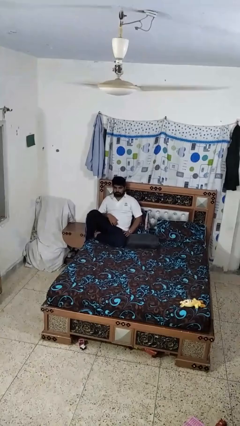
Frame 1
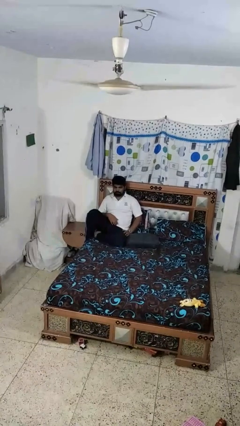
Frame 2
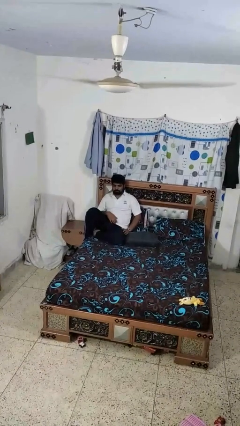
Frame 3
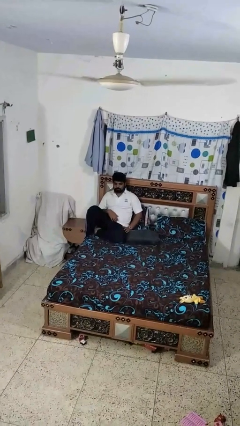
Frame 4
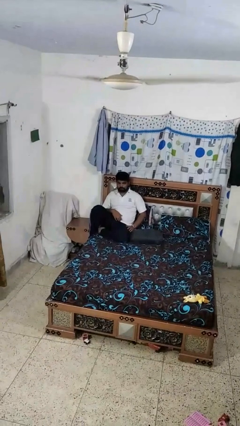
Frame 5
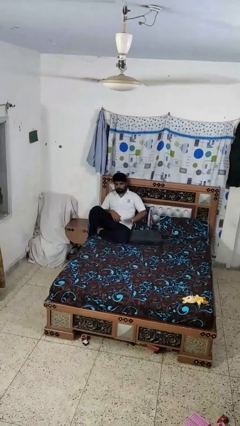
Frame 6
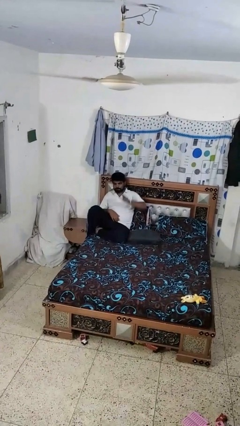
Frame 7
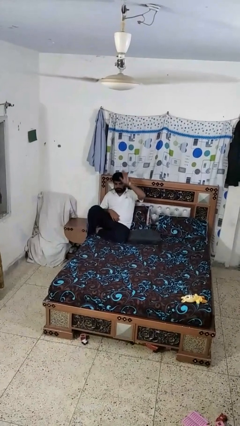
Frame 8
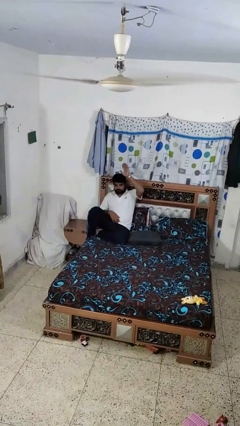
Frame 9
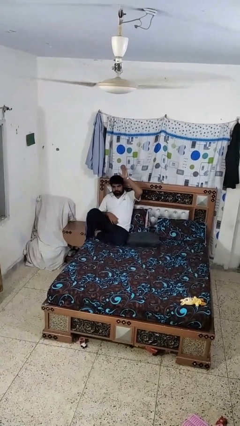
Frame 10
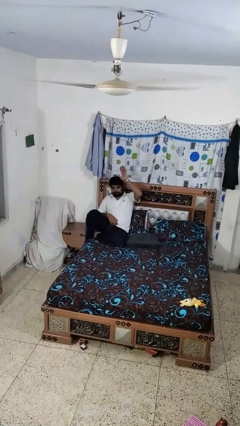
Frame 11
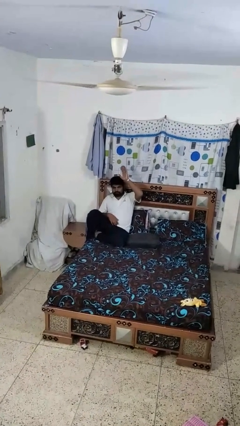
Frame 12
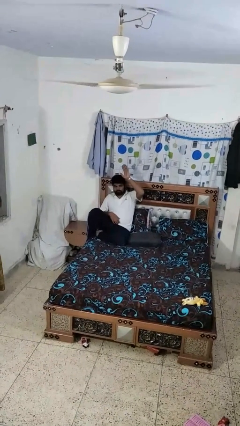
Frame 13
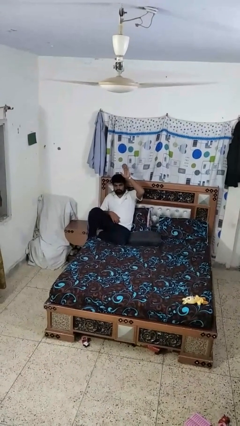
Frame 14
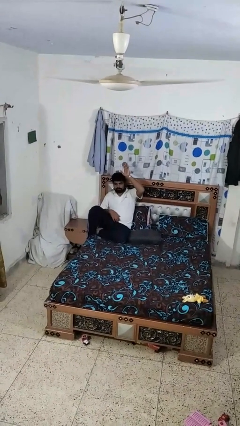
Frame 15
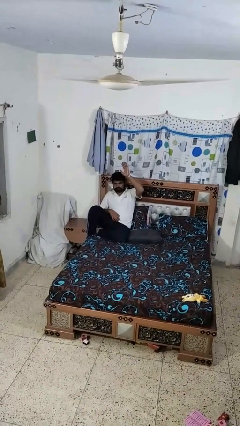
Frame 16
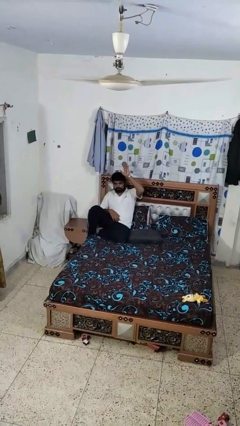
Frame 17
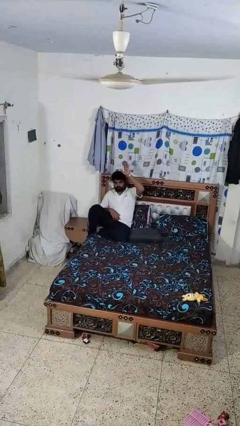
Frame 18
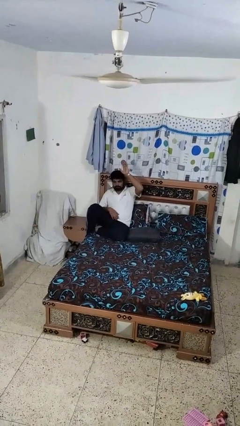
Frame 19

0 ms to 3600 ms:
person gestures raise hand

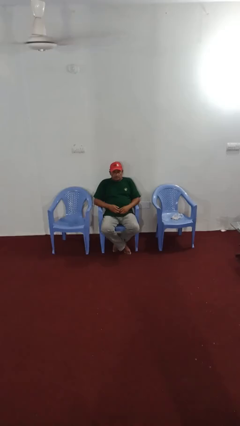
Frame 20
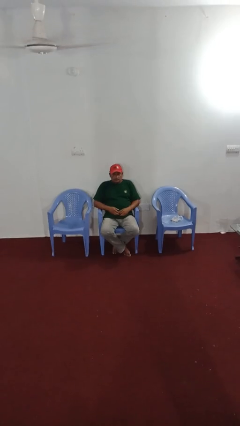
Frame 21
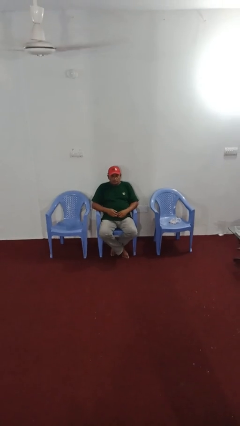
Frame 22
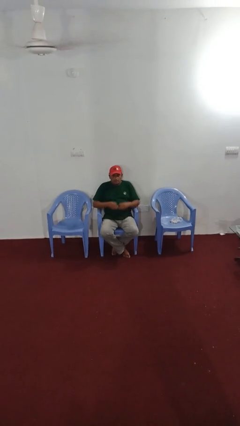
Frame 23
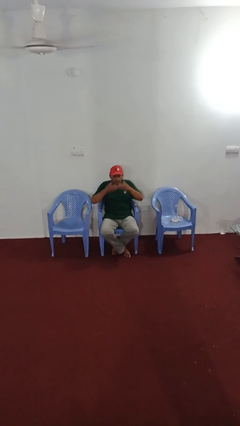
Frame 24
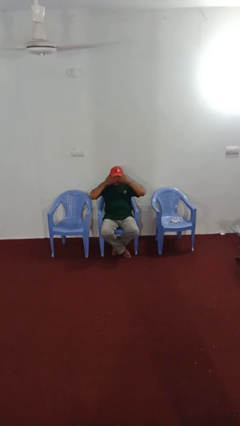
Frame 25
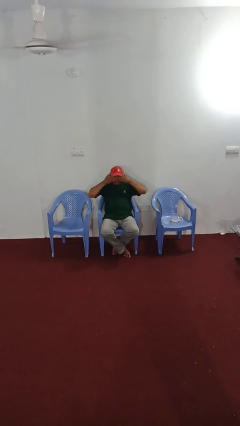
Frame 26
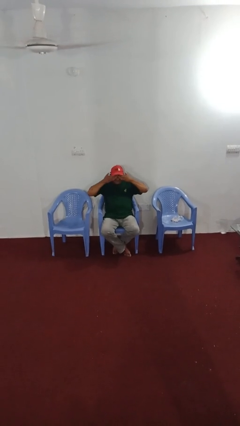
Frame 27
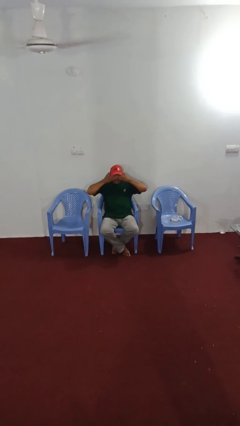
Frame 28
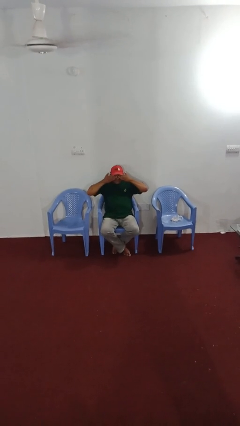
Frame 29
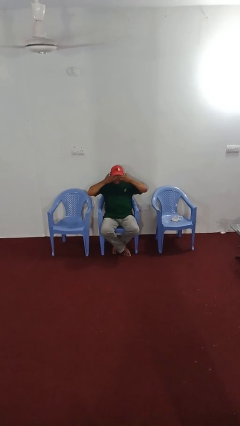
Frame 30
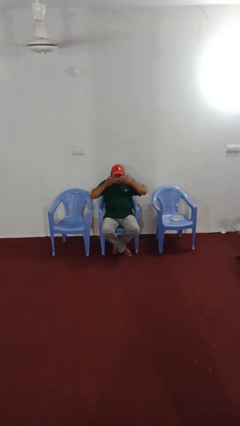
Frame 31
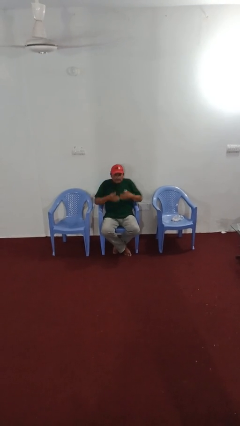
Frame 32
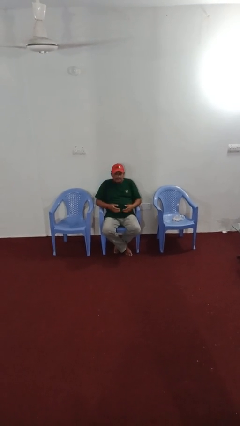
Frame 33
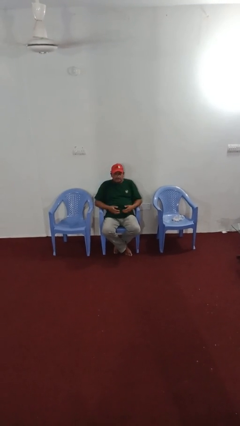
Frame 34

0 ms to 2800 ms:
person rubs eyes

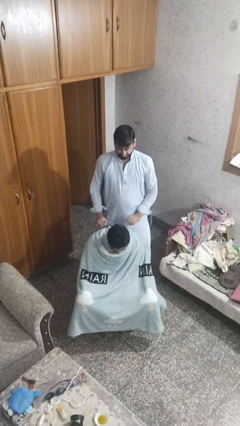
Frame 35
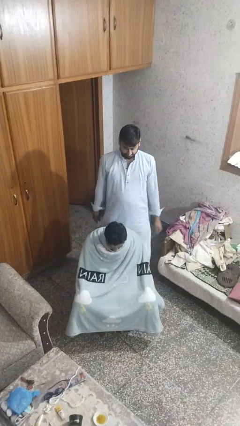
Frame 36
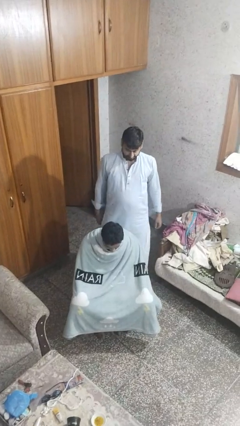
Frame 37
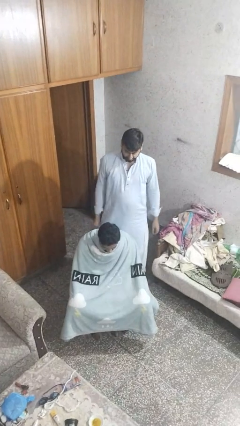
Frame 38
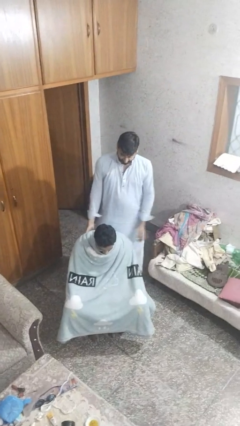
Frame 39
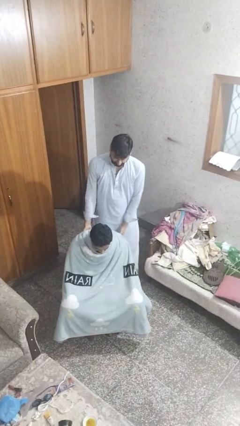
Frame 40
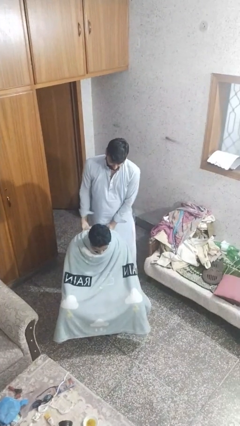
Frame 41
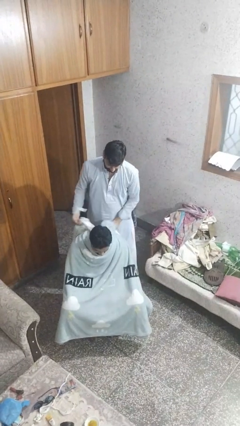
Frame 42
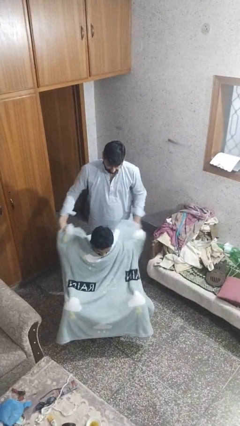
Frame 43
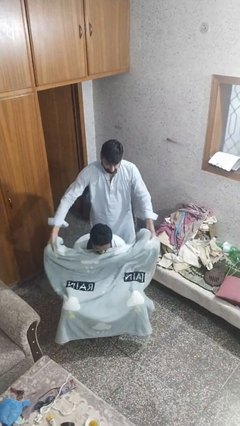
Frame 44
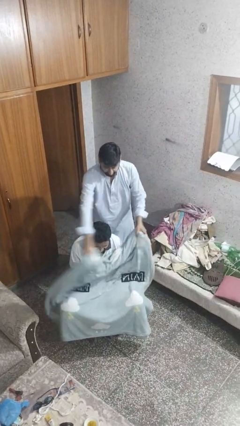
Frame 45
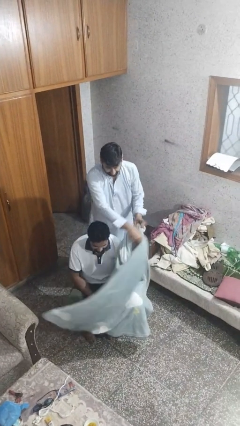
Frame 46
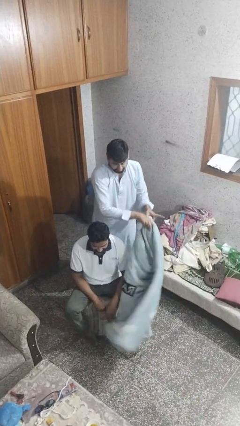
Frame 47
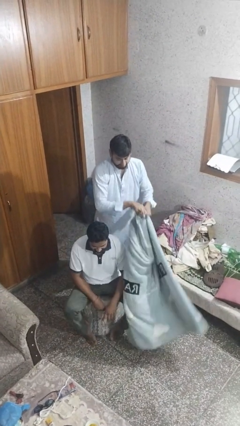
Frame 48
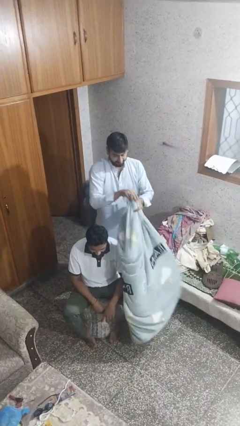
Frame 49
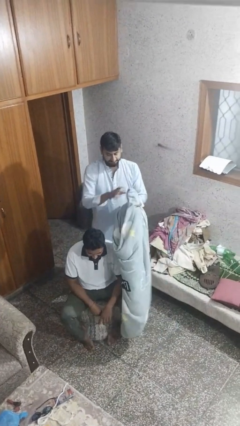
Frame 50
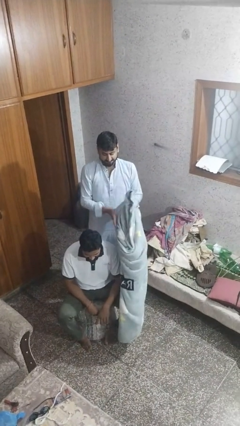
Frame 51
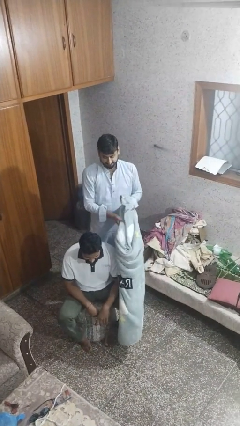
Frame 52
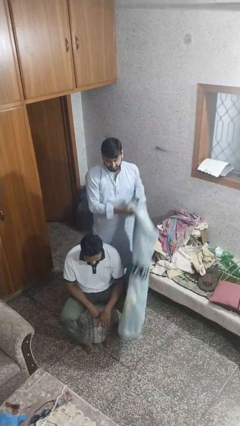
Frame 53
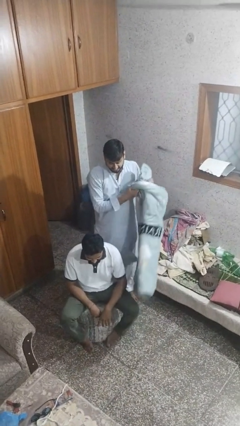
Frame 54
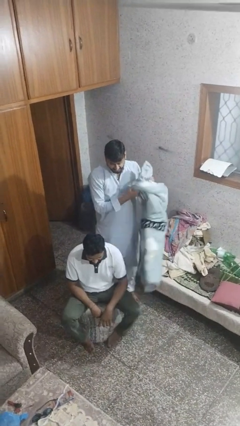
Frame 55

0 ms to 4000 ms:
person uncovers friend with blanket

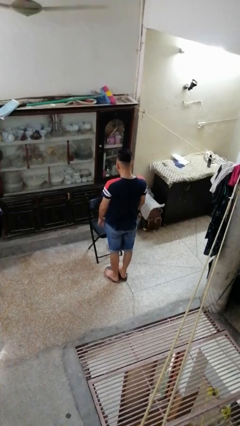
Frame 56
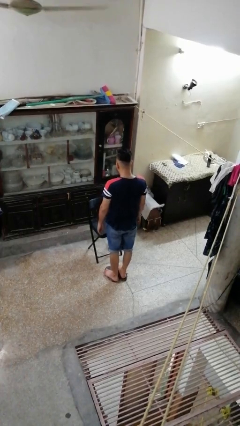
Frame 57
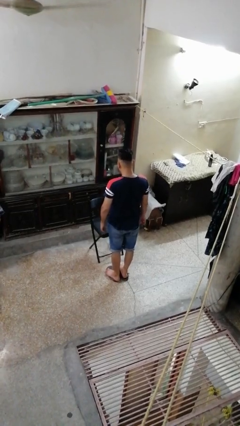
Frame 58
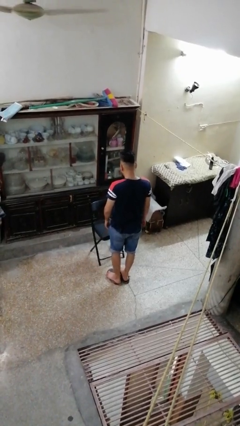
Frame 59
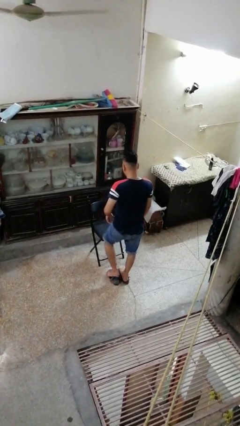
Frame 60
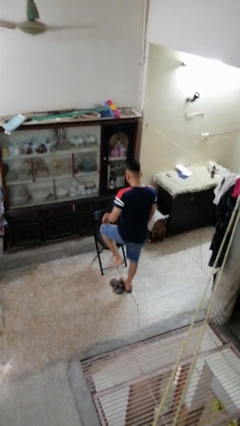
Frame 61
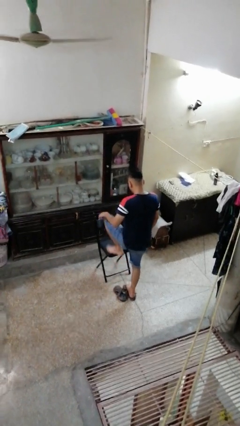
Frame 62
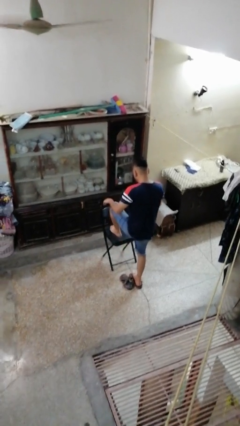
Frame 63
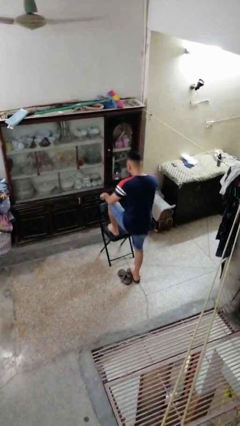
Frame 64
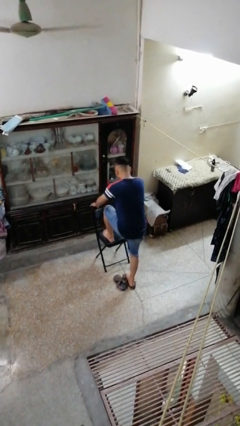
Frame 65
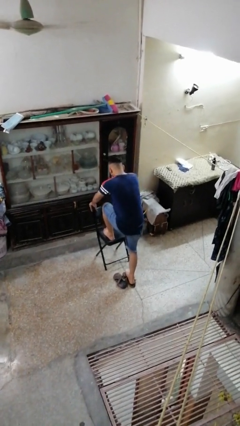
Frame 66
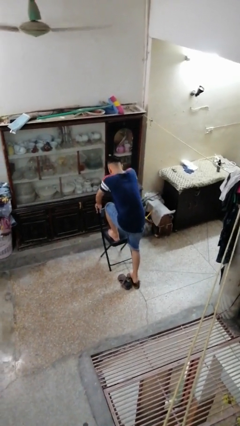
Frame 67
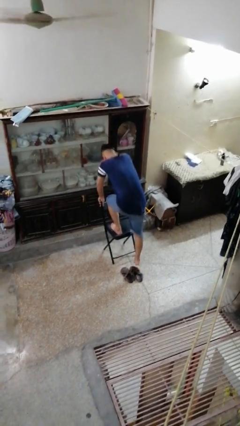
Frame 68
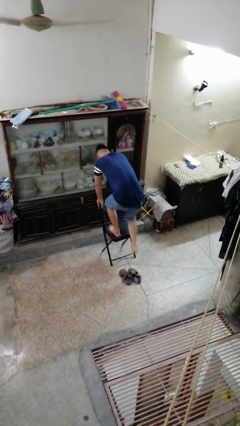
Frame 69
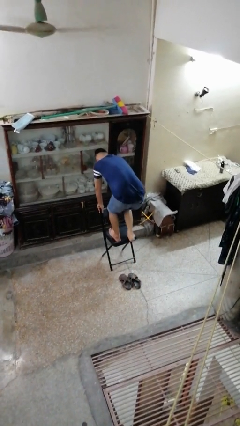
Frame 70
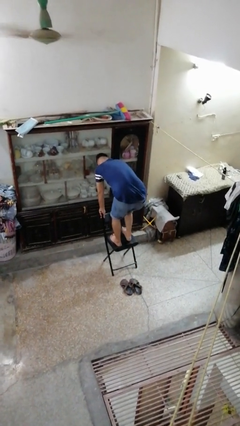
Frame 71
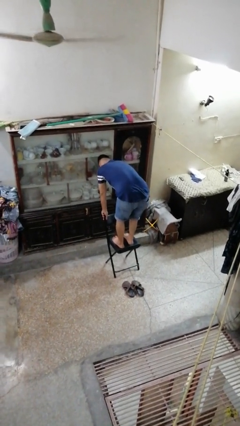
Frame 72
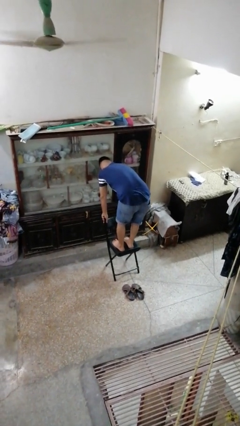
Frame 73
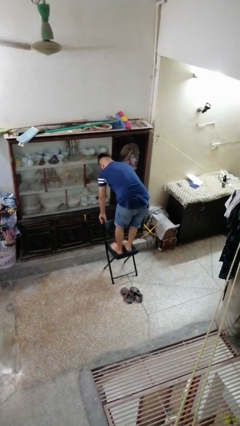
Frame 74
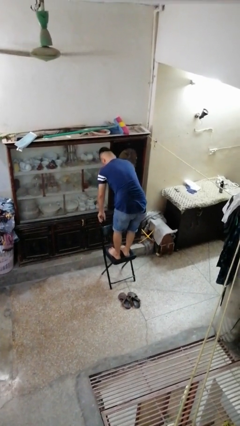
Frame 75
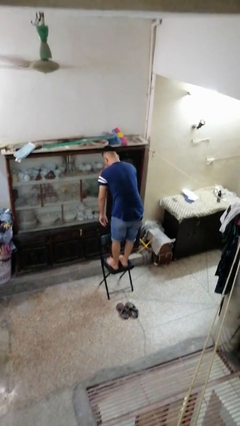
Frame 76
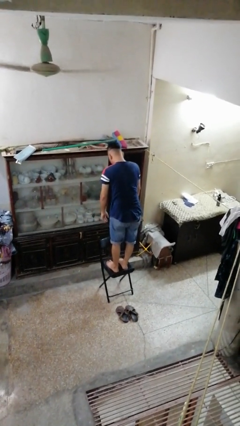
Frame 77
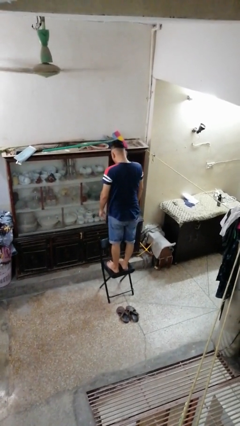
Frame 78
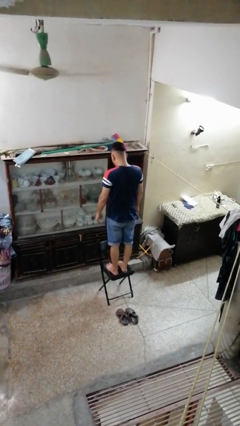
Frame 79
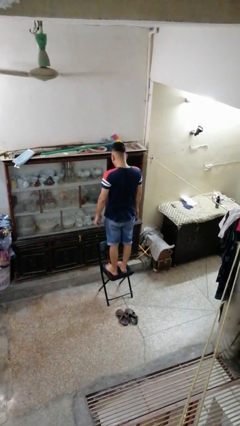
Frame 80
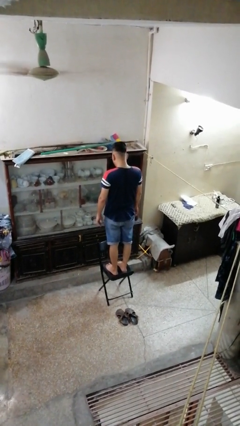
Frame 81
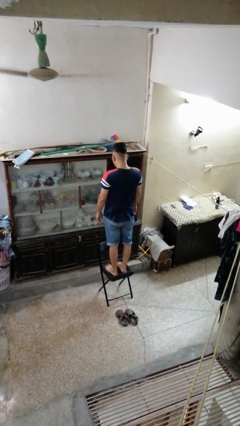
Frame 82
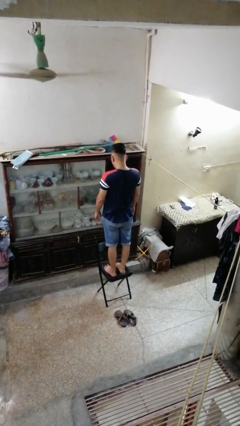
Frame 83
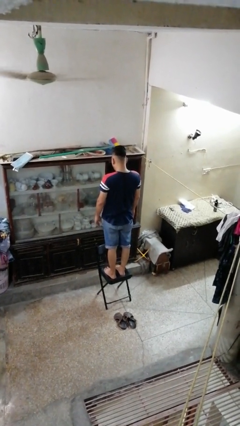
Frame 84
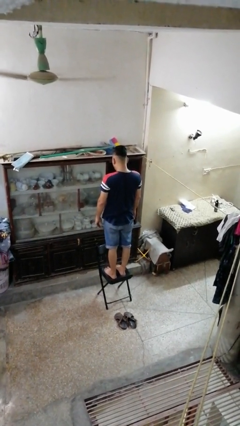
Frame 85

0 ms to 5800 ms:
person climbs on chair

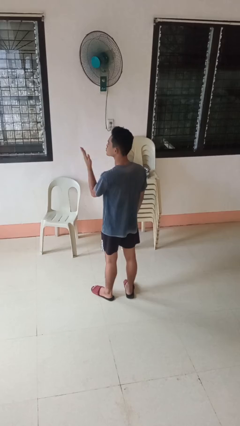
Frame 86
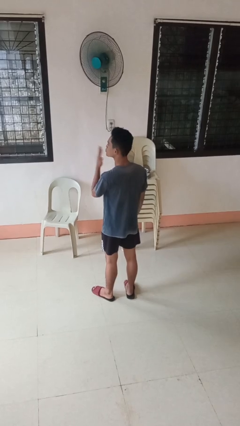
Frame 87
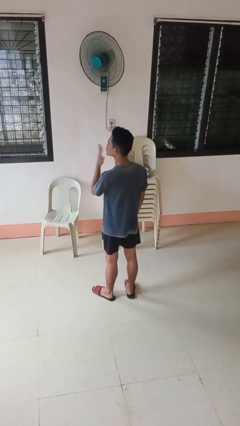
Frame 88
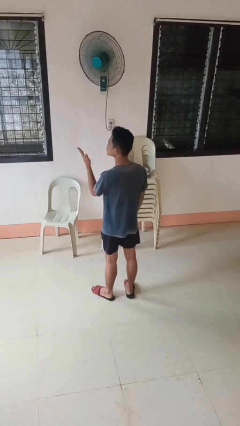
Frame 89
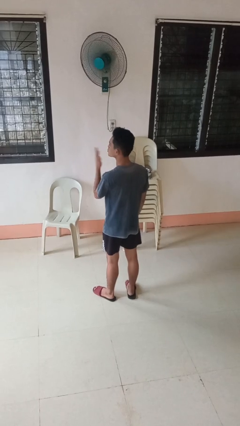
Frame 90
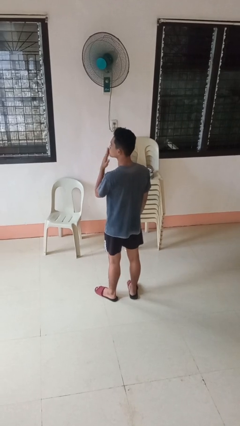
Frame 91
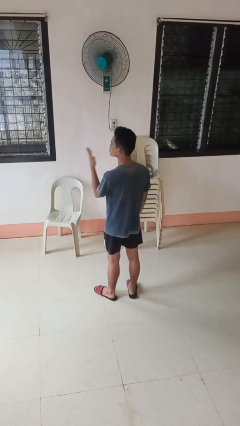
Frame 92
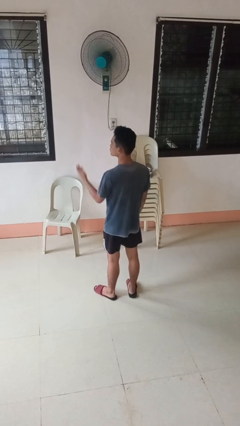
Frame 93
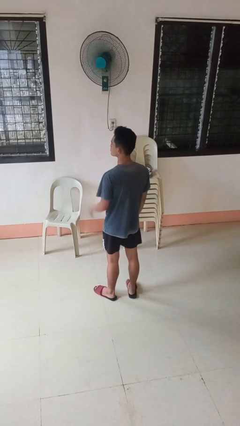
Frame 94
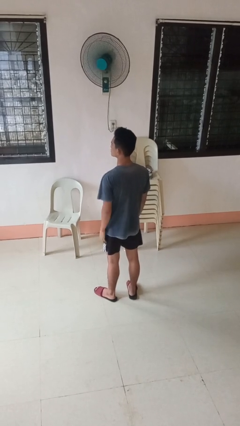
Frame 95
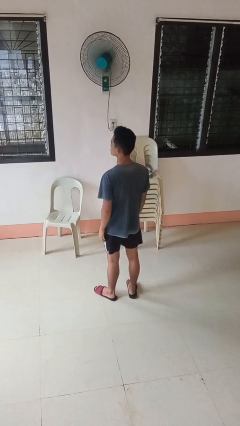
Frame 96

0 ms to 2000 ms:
person gestures blow kiss
